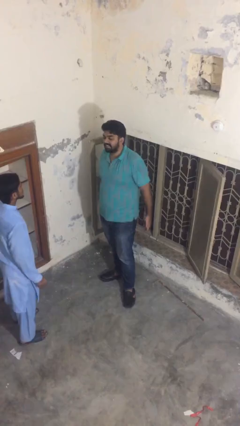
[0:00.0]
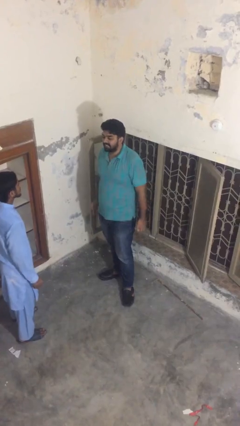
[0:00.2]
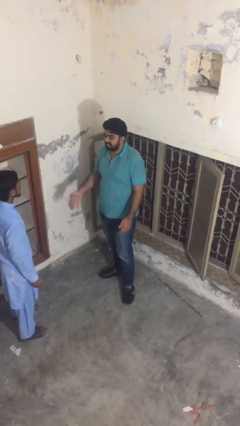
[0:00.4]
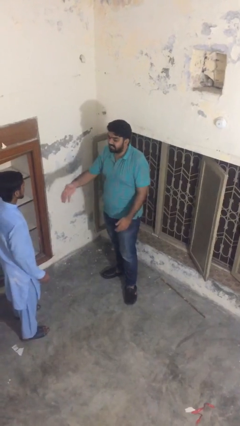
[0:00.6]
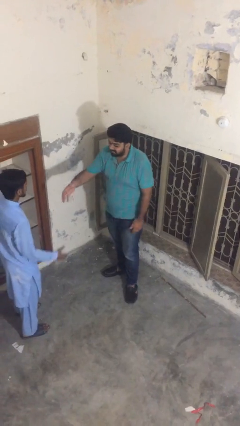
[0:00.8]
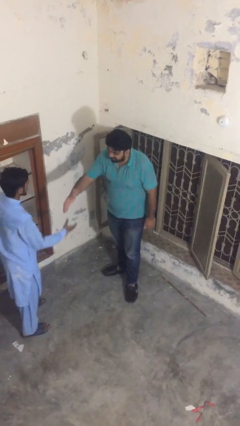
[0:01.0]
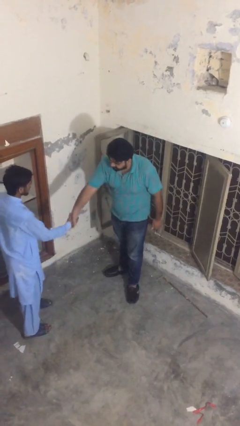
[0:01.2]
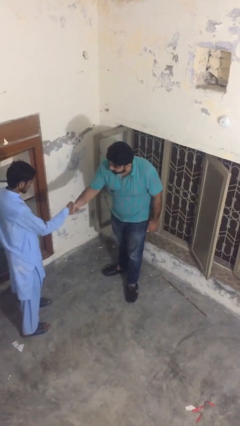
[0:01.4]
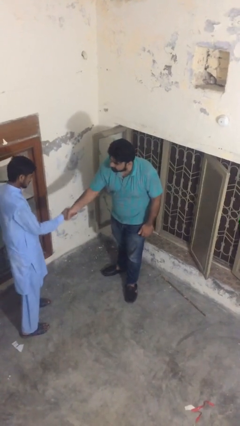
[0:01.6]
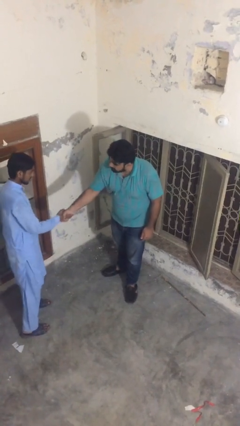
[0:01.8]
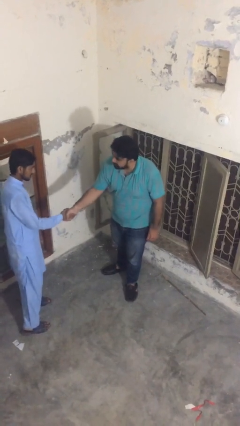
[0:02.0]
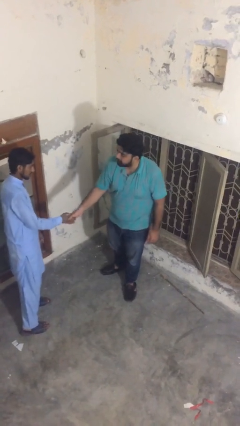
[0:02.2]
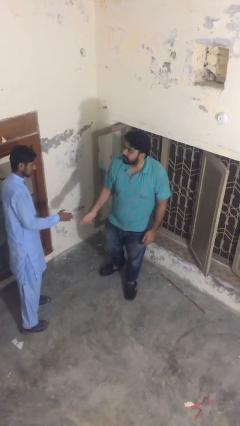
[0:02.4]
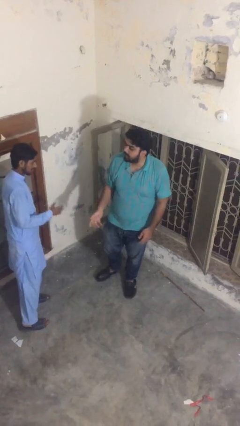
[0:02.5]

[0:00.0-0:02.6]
person shakes hand

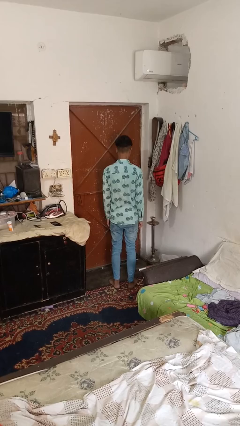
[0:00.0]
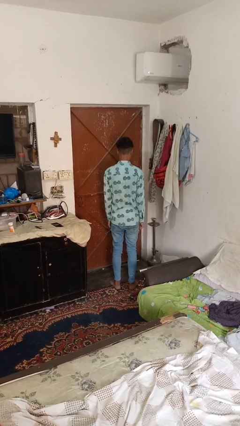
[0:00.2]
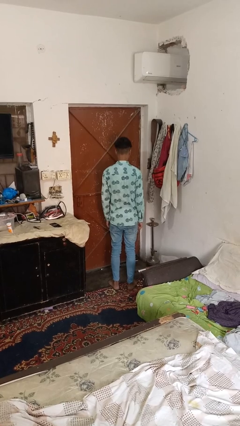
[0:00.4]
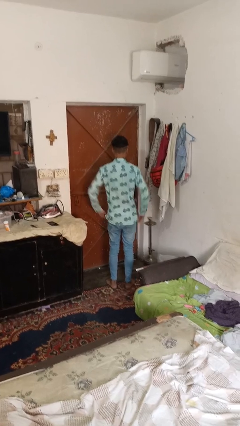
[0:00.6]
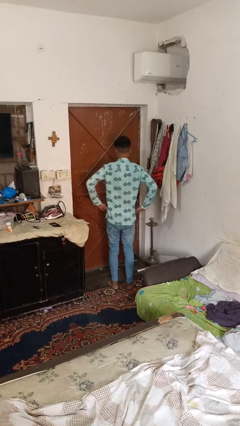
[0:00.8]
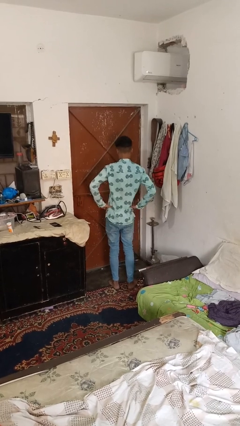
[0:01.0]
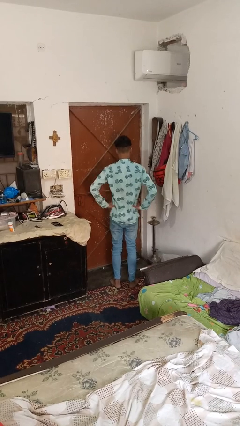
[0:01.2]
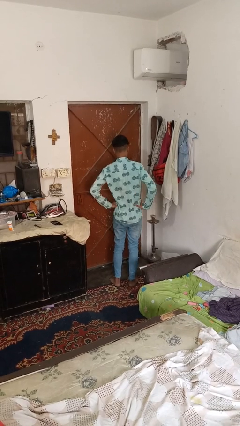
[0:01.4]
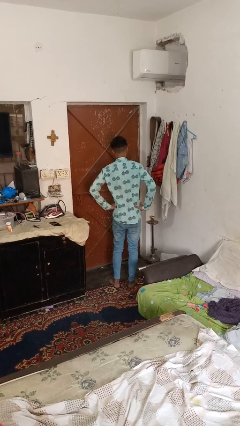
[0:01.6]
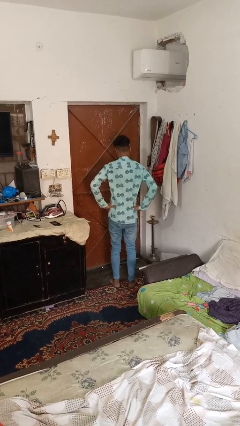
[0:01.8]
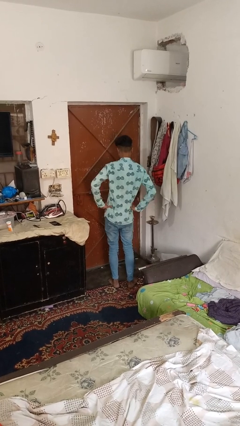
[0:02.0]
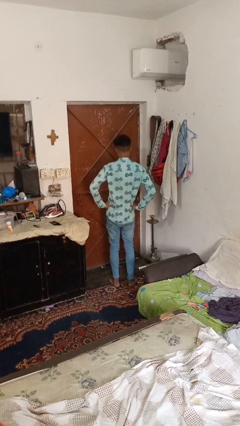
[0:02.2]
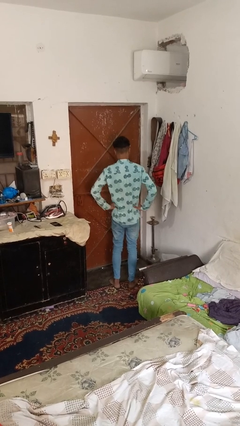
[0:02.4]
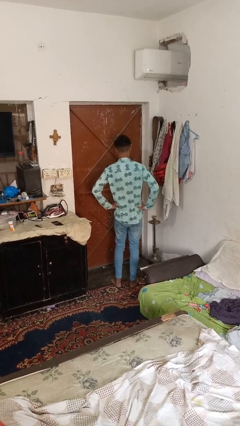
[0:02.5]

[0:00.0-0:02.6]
person wiggles hips

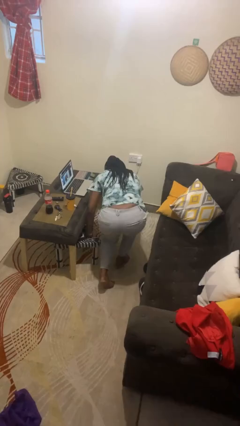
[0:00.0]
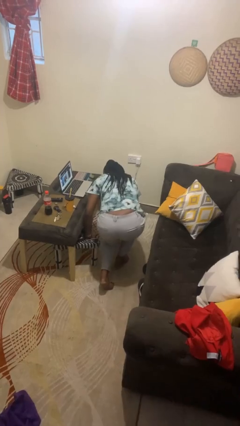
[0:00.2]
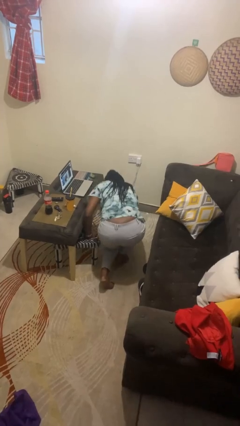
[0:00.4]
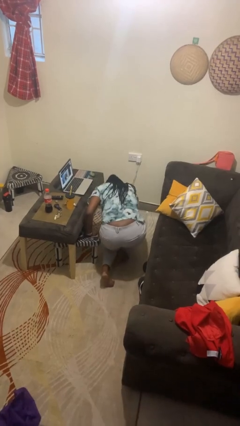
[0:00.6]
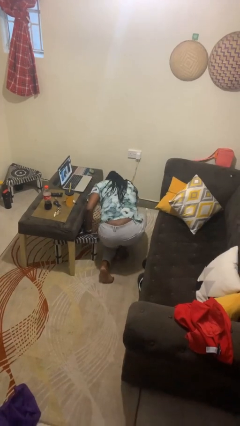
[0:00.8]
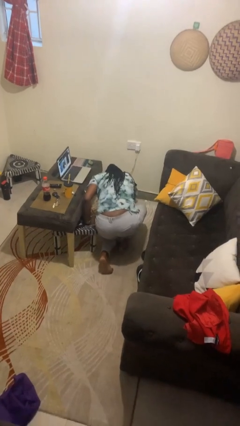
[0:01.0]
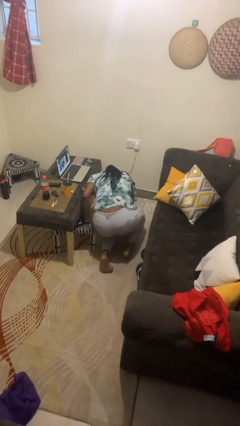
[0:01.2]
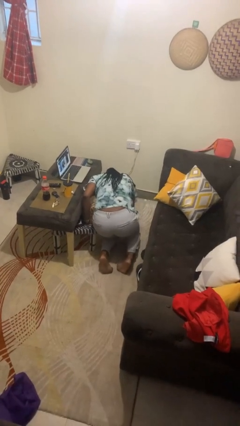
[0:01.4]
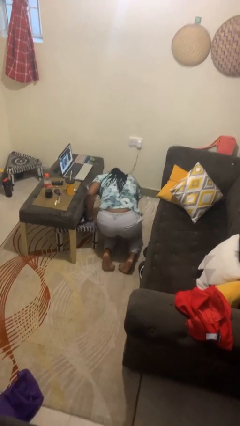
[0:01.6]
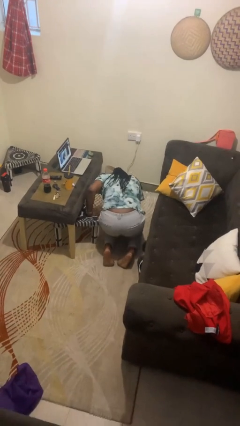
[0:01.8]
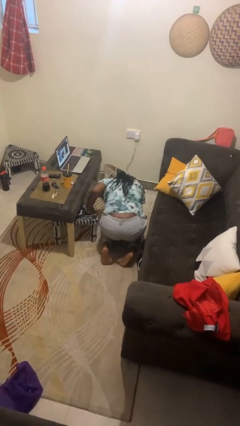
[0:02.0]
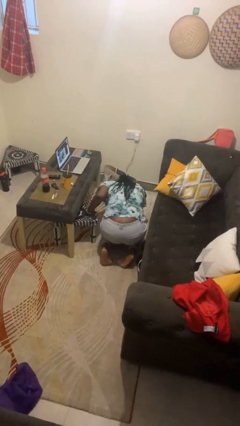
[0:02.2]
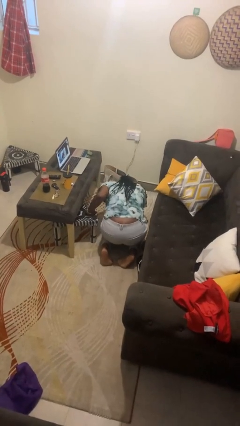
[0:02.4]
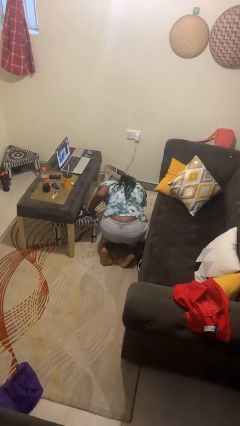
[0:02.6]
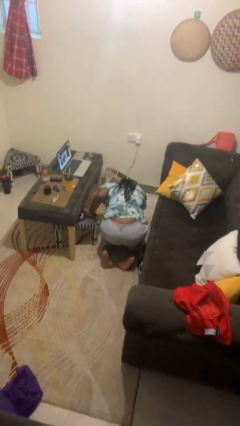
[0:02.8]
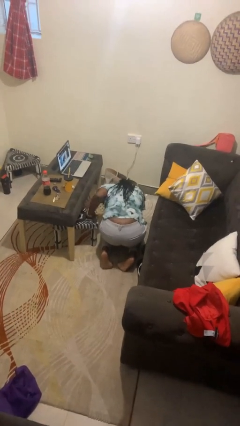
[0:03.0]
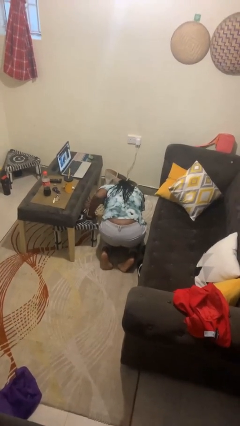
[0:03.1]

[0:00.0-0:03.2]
person lies down on floor

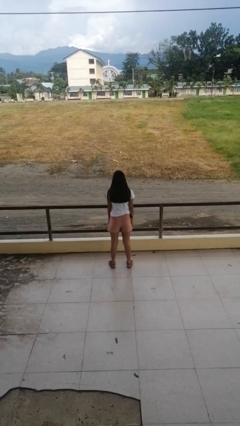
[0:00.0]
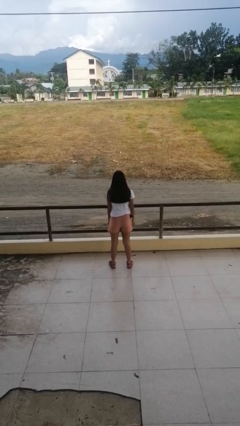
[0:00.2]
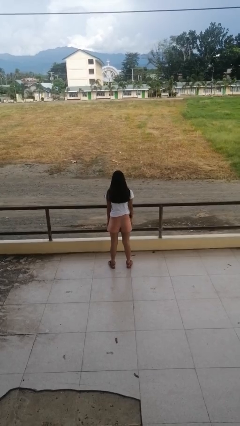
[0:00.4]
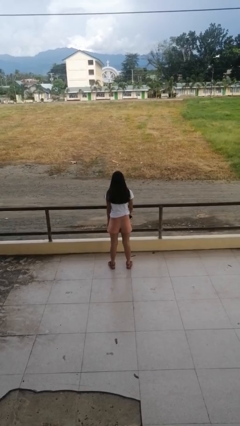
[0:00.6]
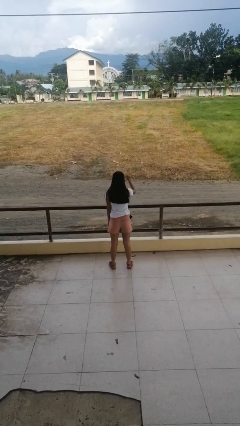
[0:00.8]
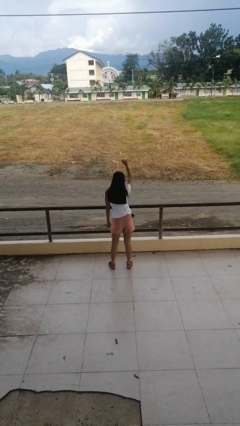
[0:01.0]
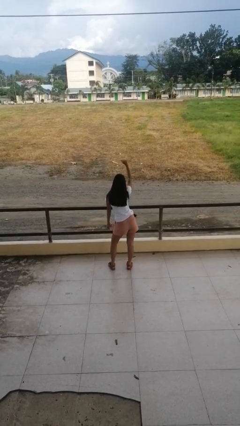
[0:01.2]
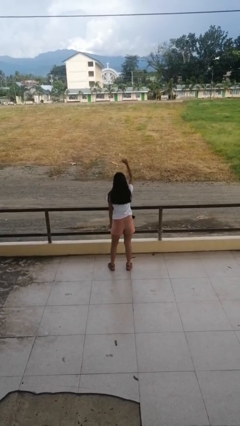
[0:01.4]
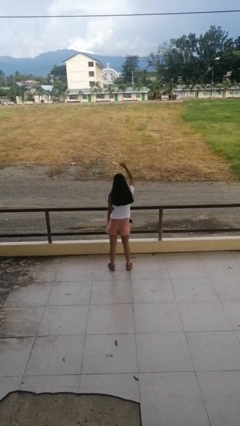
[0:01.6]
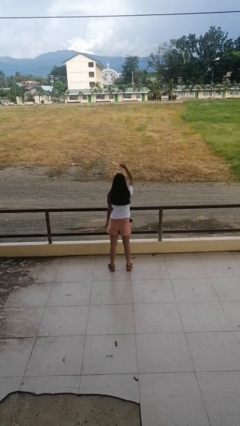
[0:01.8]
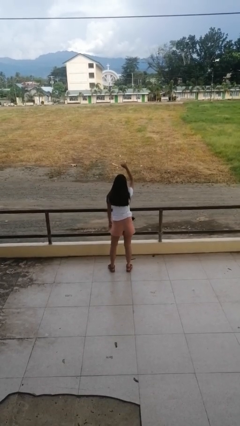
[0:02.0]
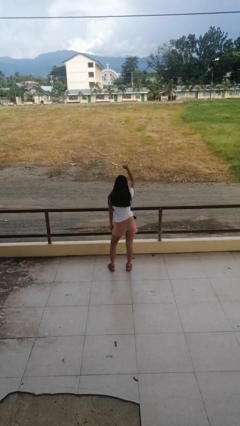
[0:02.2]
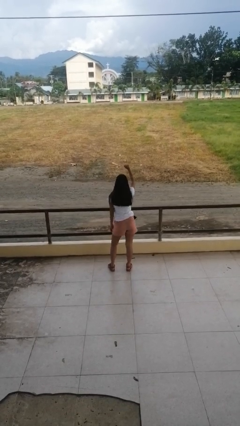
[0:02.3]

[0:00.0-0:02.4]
person dances in place

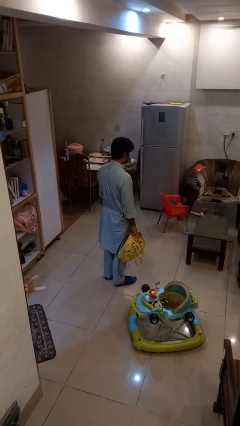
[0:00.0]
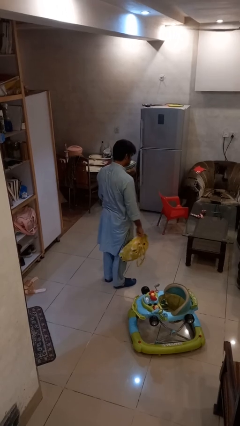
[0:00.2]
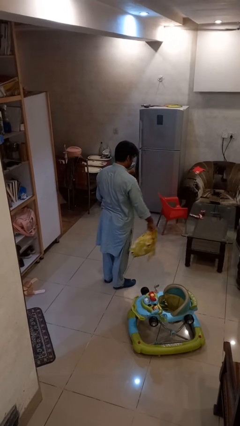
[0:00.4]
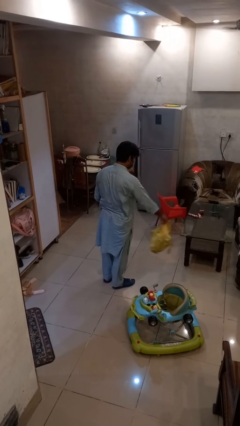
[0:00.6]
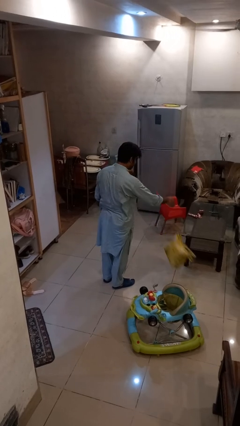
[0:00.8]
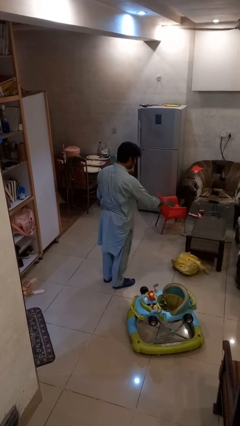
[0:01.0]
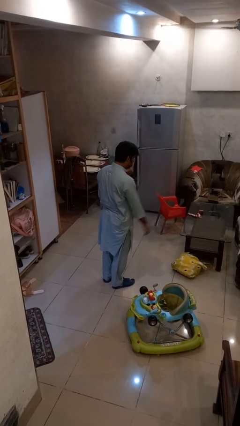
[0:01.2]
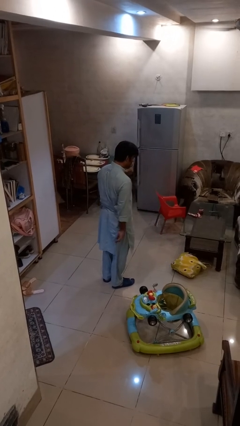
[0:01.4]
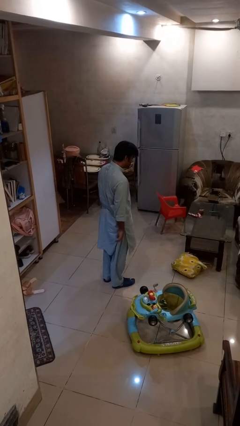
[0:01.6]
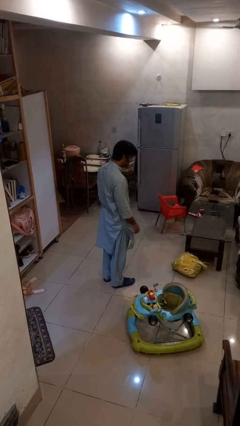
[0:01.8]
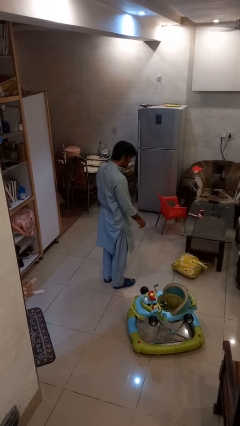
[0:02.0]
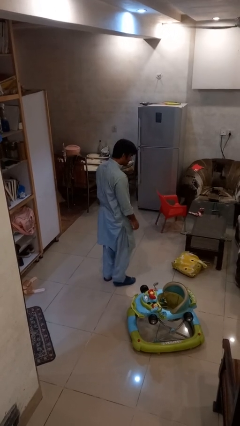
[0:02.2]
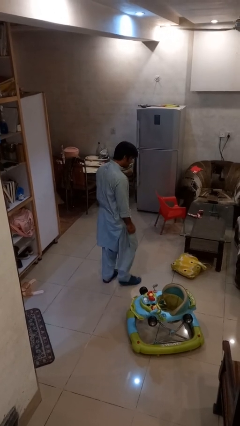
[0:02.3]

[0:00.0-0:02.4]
person throws object to ground

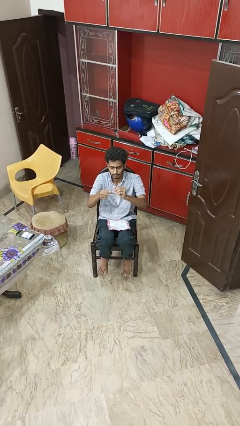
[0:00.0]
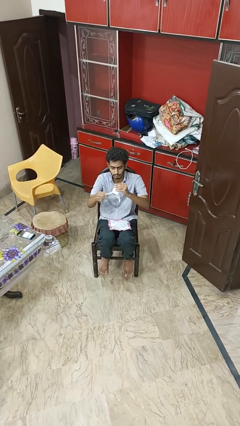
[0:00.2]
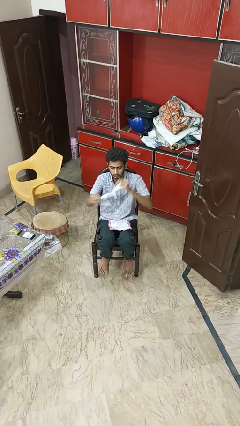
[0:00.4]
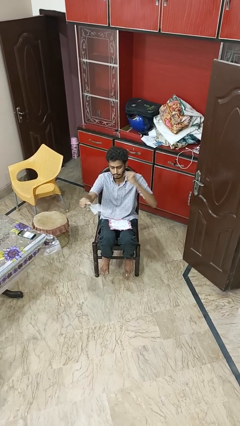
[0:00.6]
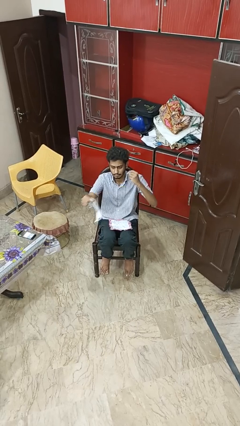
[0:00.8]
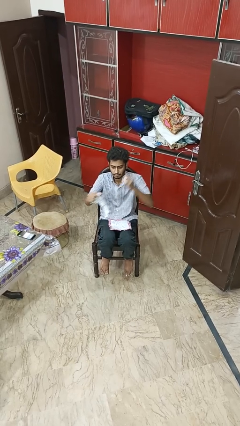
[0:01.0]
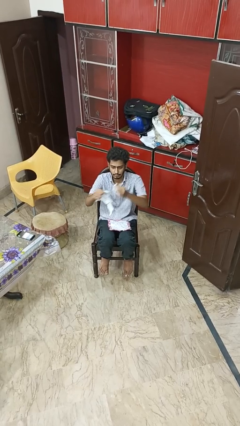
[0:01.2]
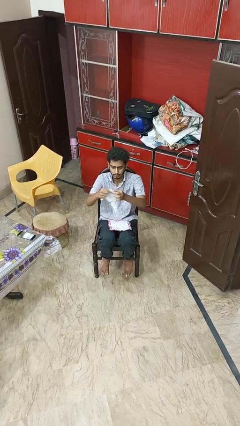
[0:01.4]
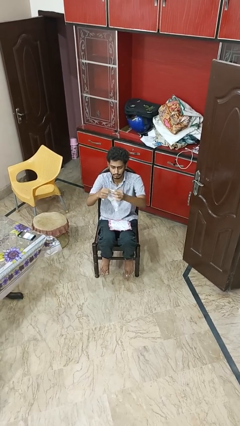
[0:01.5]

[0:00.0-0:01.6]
person tears paper

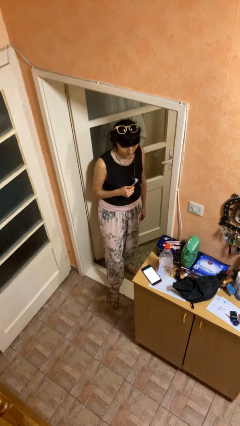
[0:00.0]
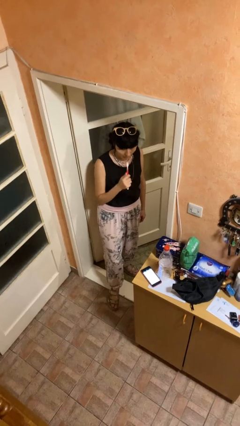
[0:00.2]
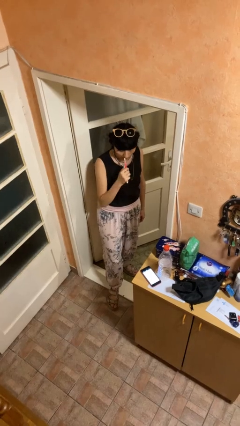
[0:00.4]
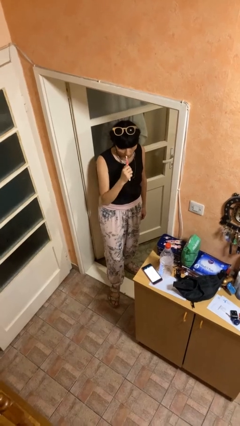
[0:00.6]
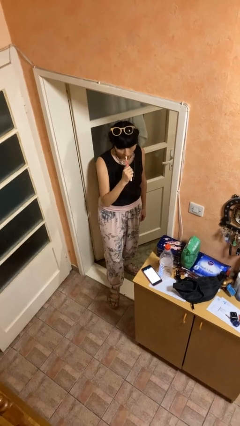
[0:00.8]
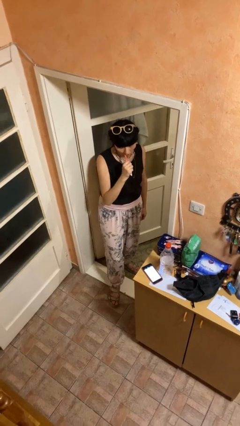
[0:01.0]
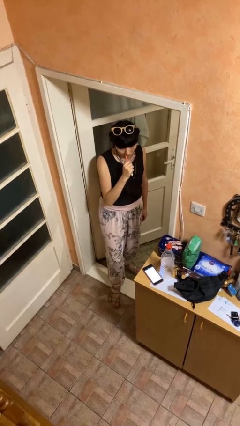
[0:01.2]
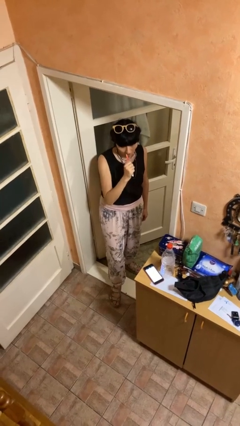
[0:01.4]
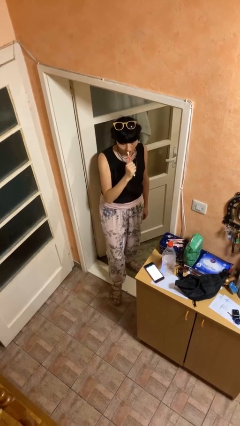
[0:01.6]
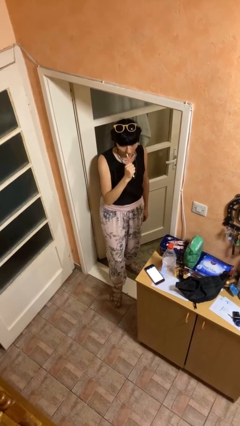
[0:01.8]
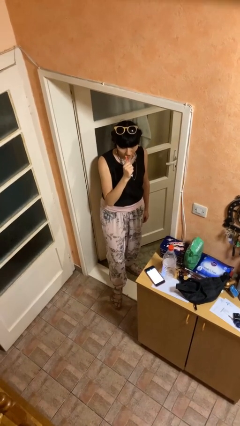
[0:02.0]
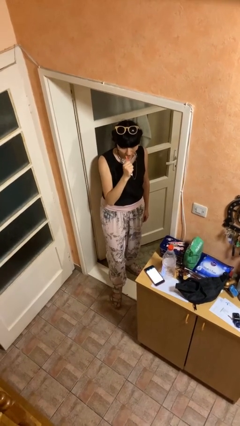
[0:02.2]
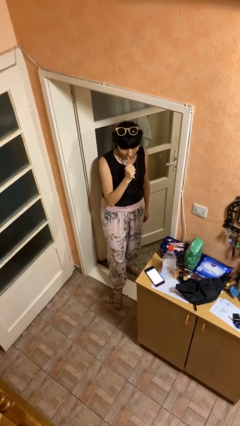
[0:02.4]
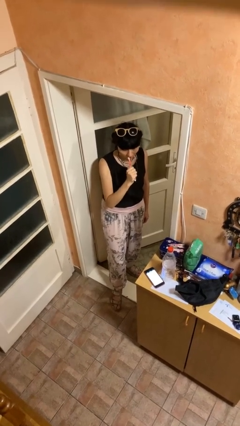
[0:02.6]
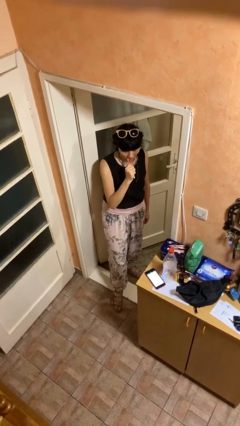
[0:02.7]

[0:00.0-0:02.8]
person brushes teeth
